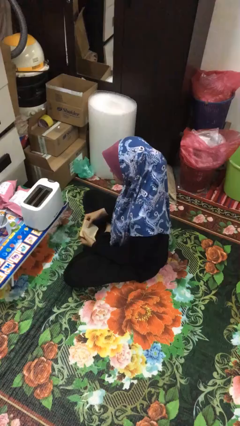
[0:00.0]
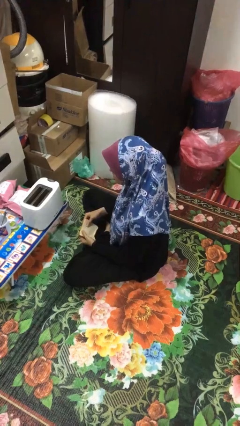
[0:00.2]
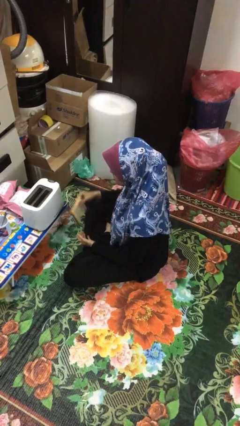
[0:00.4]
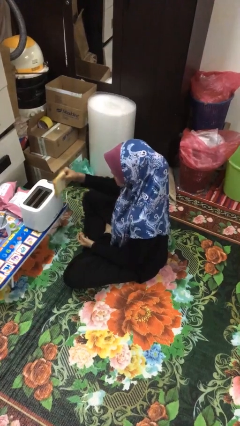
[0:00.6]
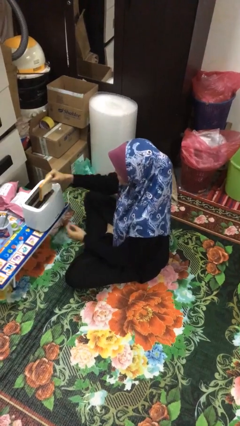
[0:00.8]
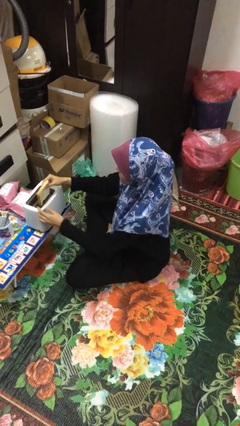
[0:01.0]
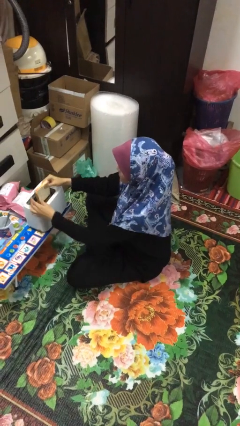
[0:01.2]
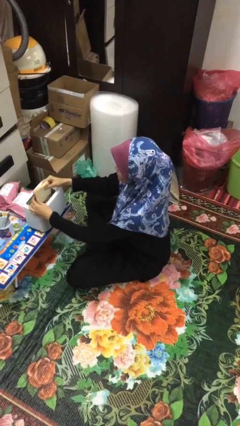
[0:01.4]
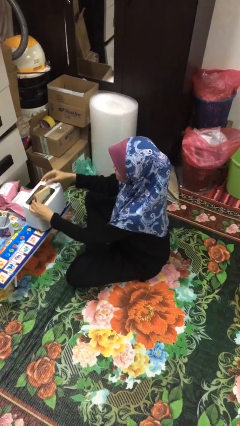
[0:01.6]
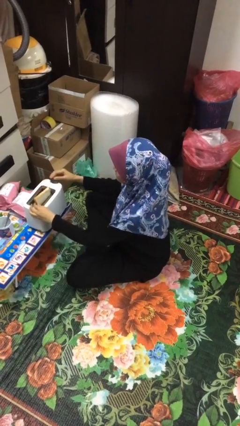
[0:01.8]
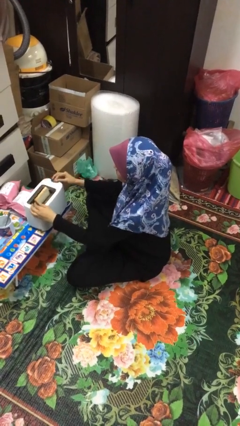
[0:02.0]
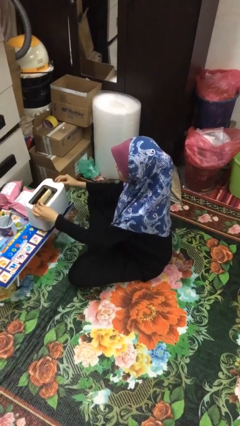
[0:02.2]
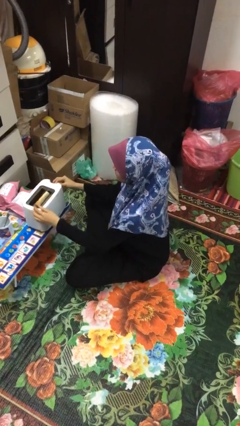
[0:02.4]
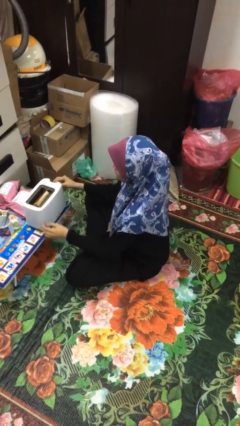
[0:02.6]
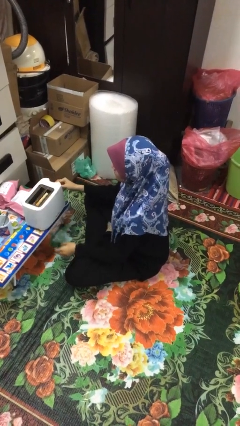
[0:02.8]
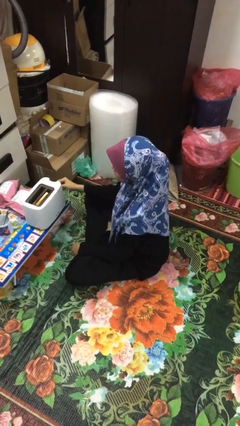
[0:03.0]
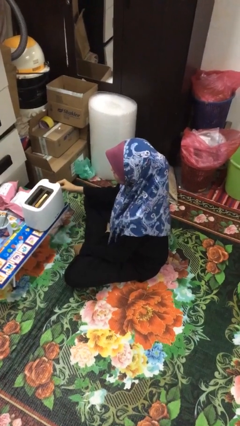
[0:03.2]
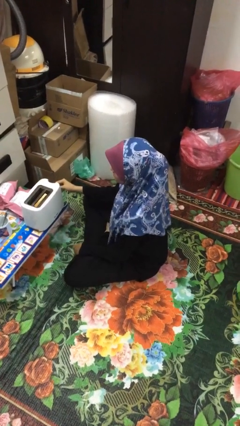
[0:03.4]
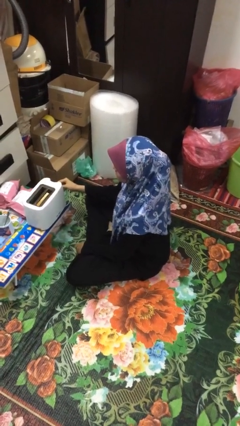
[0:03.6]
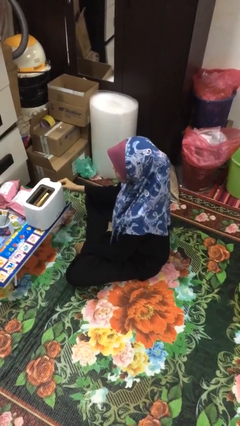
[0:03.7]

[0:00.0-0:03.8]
person puts object into toaster

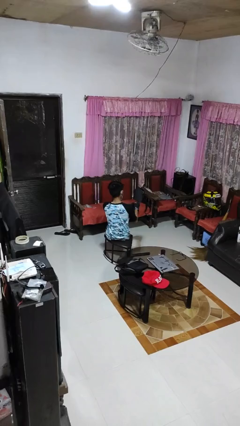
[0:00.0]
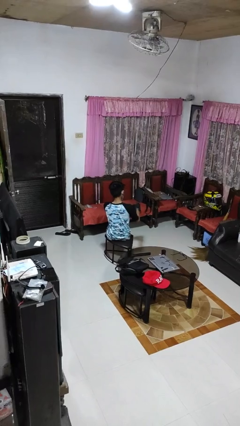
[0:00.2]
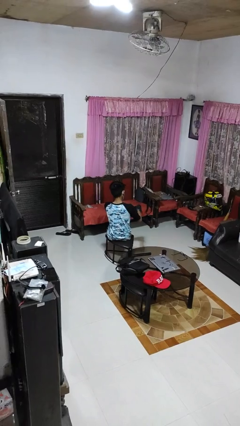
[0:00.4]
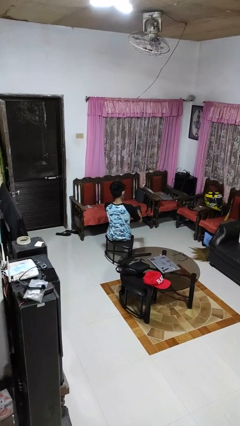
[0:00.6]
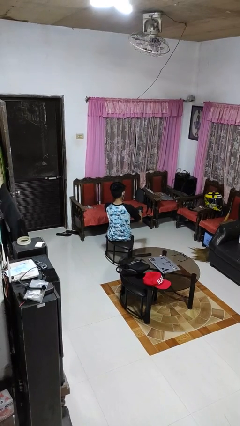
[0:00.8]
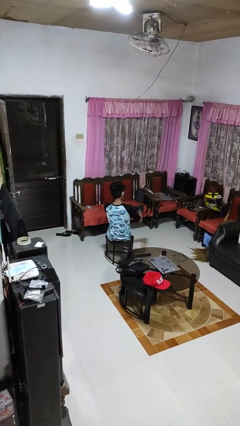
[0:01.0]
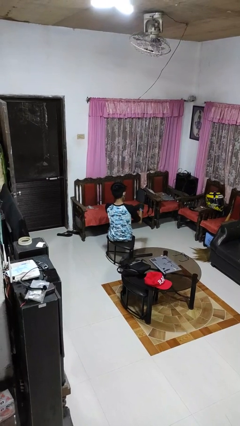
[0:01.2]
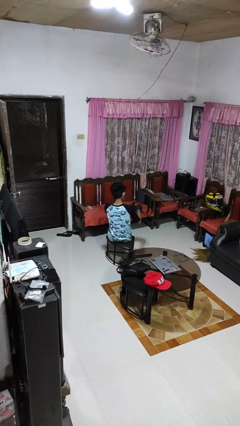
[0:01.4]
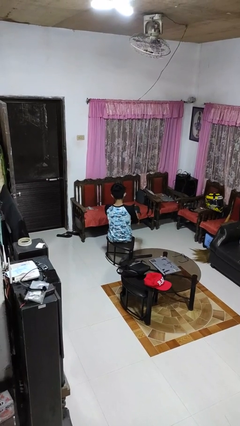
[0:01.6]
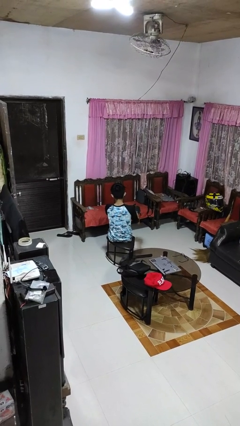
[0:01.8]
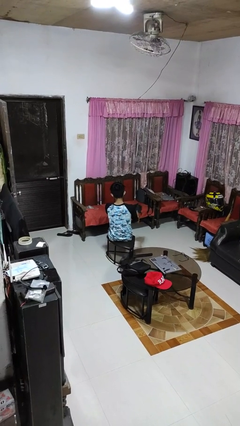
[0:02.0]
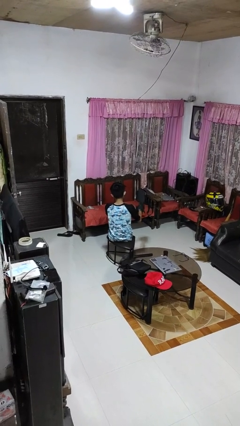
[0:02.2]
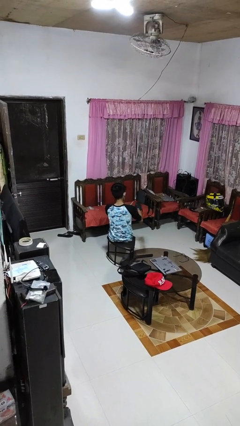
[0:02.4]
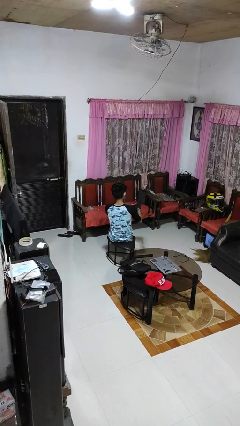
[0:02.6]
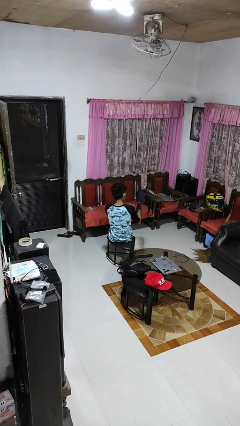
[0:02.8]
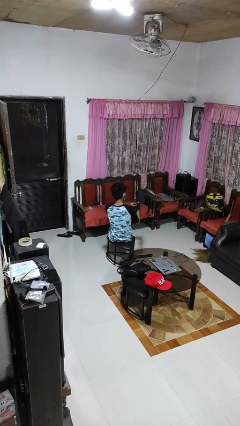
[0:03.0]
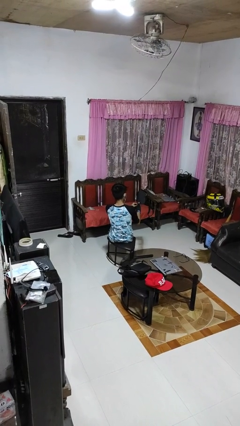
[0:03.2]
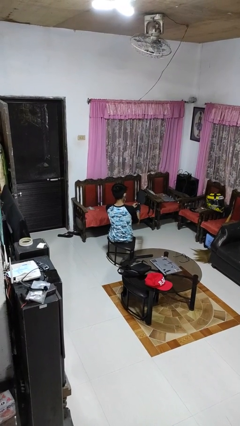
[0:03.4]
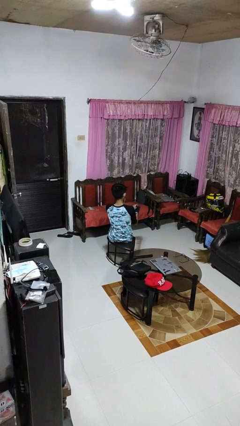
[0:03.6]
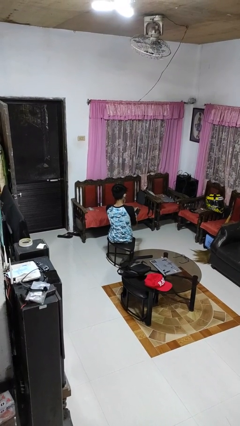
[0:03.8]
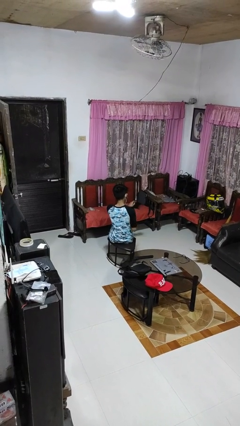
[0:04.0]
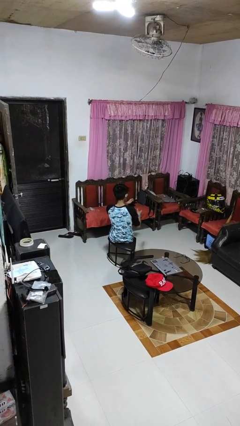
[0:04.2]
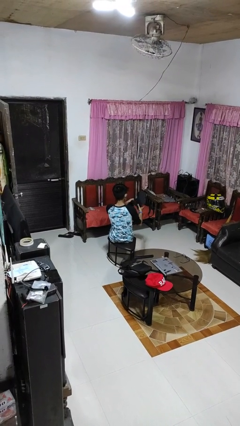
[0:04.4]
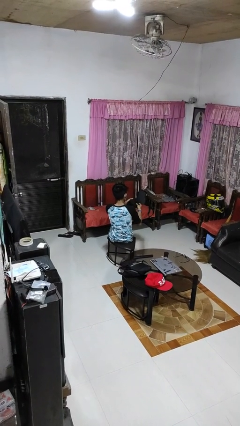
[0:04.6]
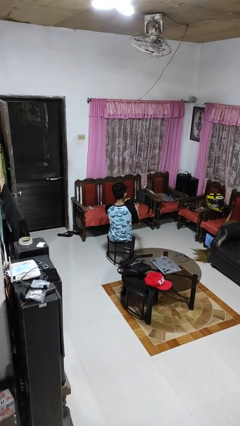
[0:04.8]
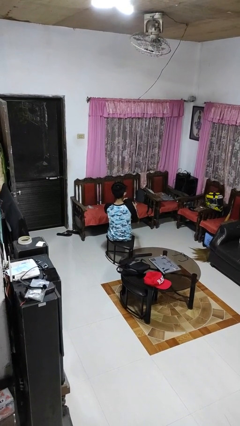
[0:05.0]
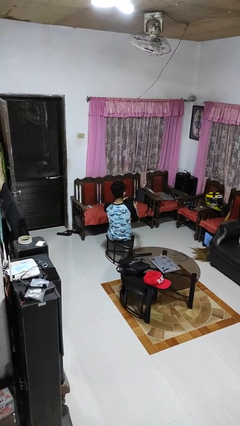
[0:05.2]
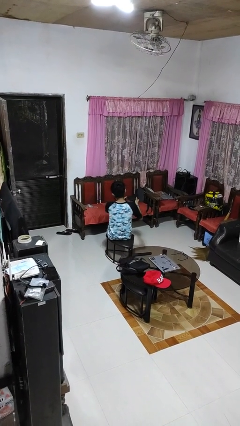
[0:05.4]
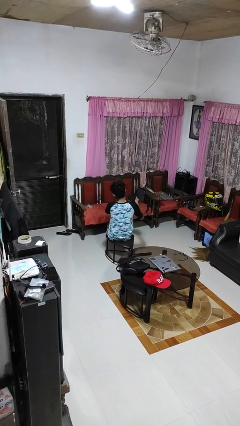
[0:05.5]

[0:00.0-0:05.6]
person takes off gloves

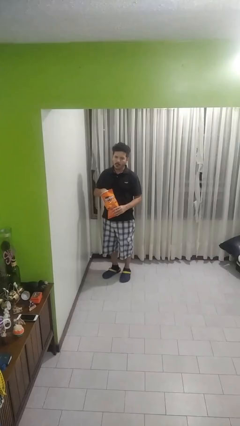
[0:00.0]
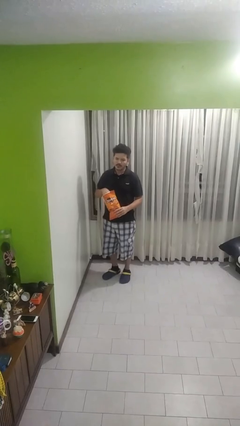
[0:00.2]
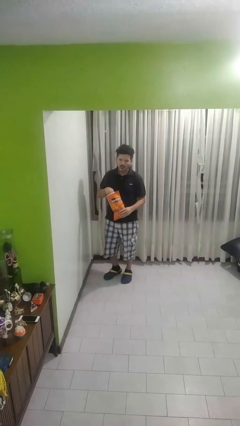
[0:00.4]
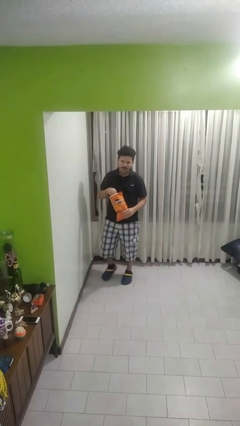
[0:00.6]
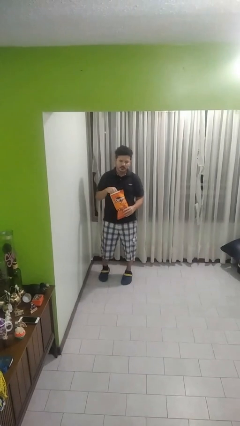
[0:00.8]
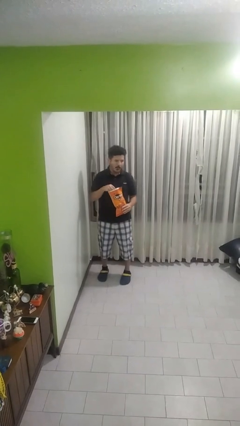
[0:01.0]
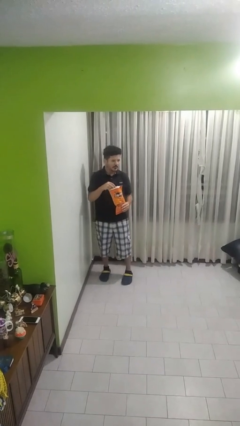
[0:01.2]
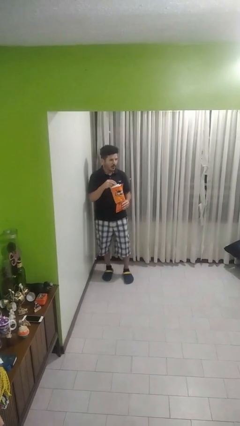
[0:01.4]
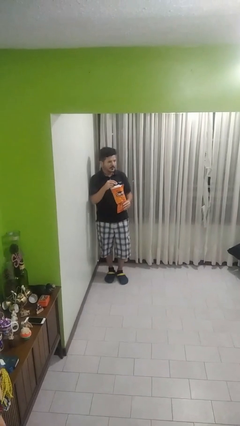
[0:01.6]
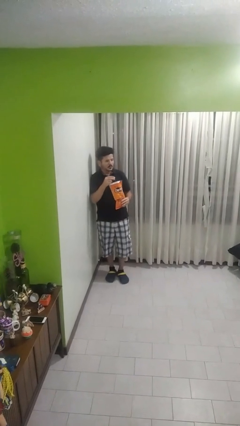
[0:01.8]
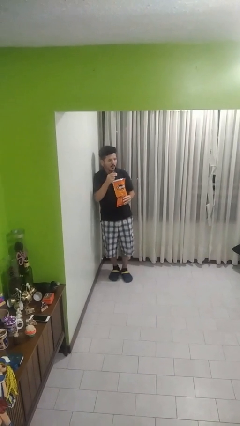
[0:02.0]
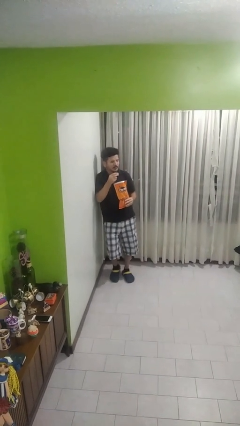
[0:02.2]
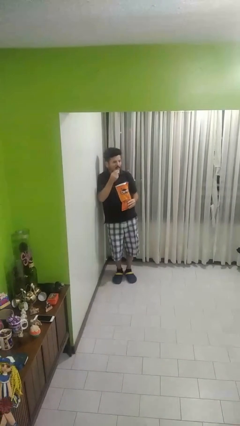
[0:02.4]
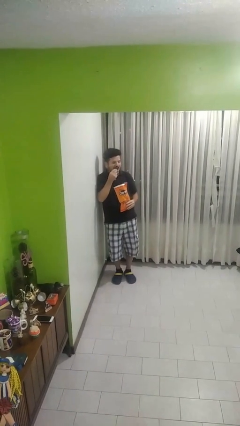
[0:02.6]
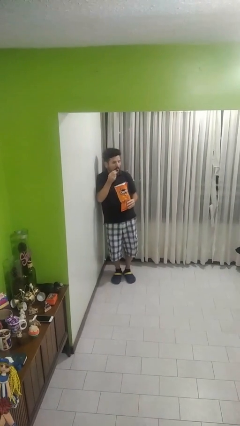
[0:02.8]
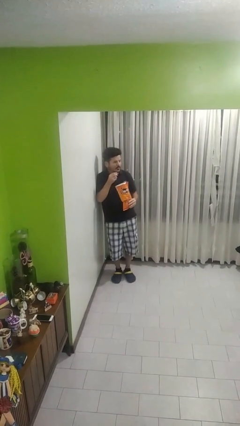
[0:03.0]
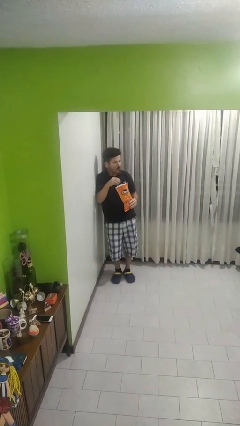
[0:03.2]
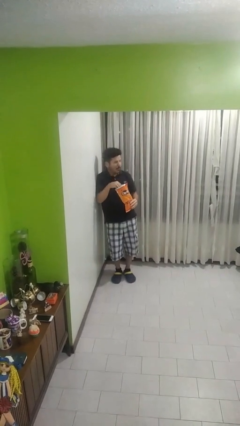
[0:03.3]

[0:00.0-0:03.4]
person eats snack from bag

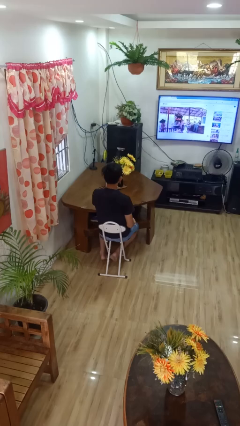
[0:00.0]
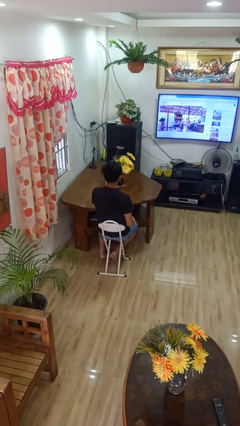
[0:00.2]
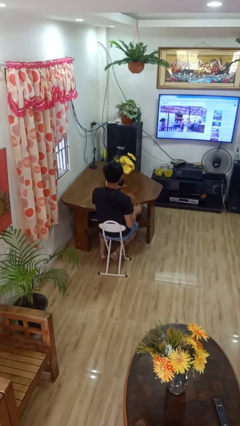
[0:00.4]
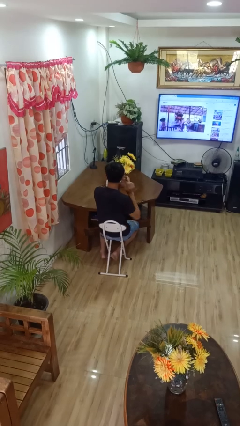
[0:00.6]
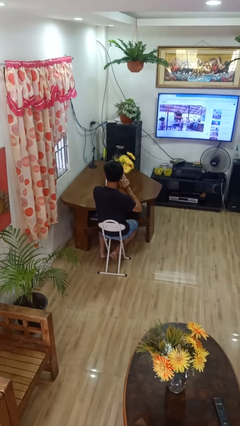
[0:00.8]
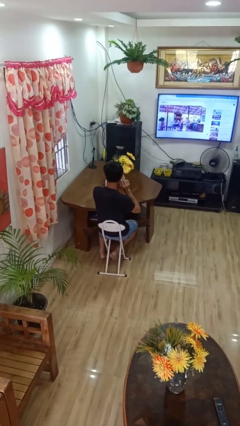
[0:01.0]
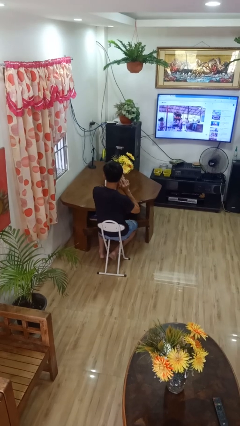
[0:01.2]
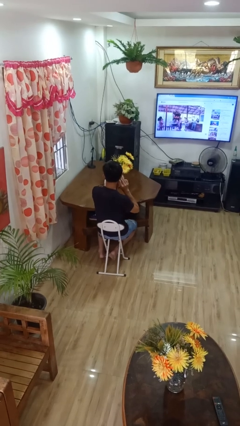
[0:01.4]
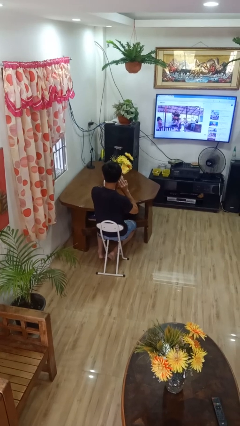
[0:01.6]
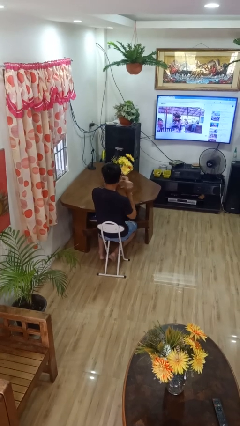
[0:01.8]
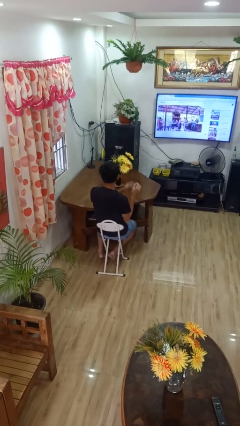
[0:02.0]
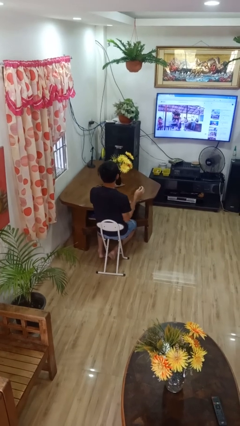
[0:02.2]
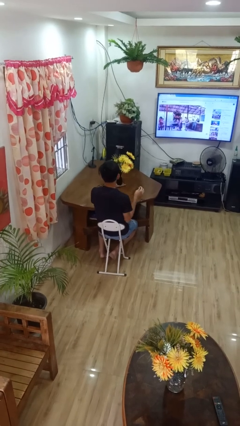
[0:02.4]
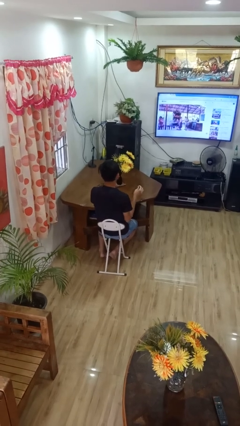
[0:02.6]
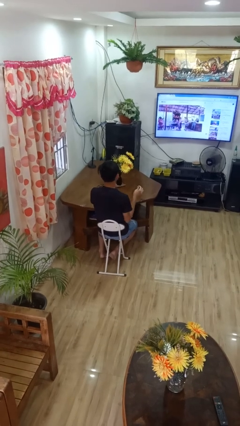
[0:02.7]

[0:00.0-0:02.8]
person takes off earrings

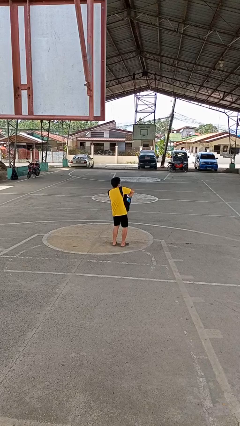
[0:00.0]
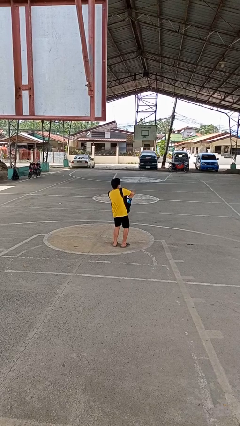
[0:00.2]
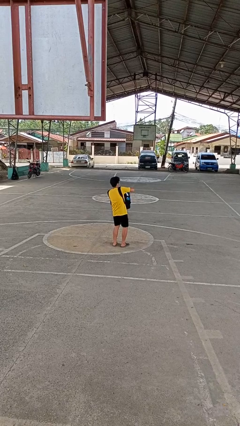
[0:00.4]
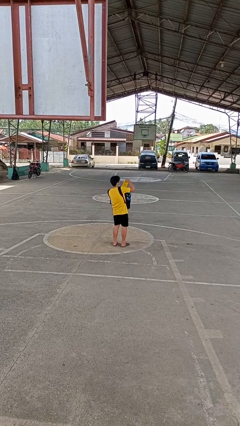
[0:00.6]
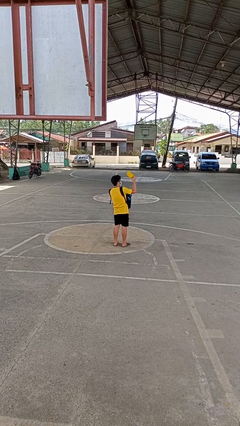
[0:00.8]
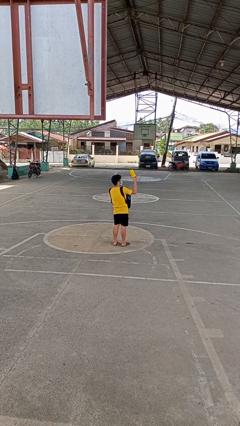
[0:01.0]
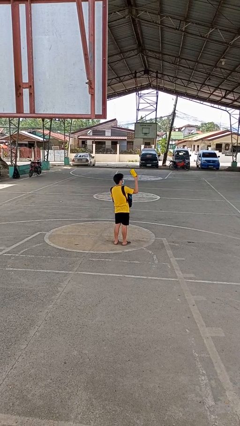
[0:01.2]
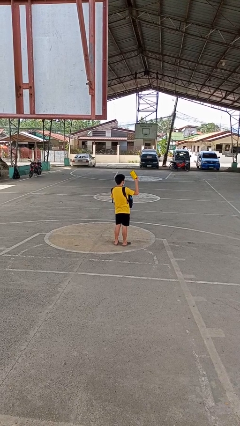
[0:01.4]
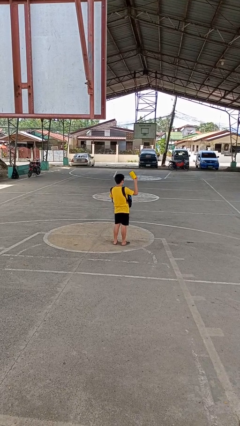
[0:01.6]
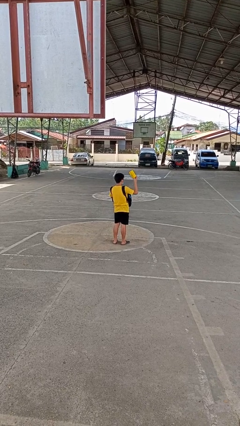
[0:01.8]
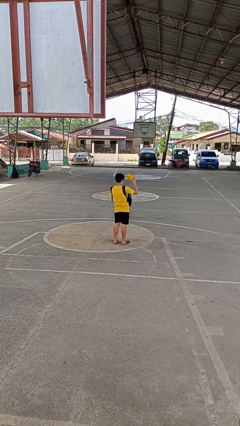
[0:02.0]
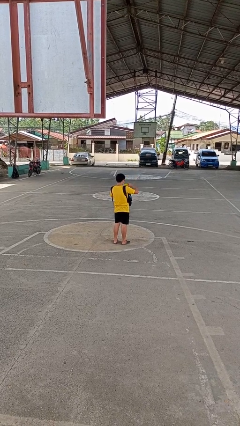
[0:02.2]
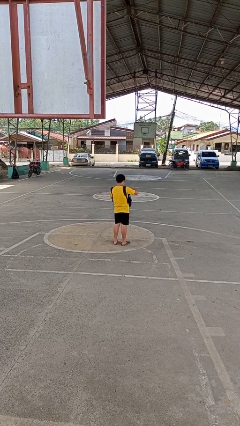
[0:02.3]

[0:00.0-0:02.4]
person takes object from backpack
